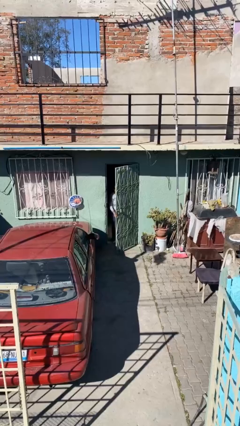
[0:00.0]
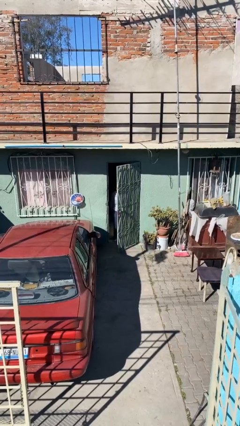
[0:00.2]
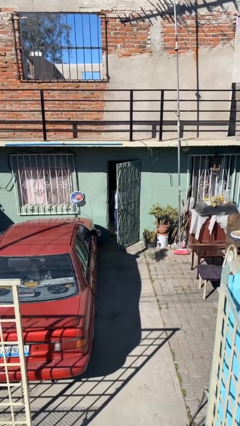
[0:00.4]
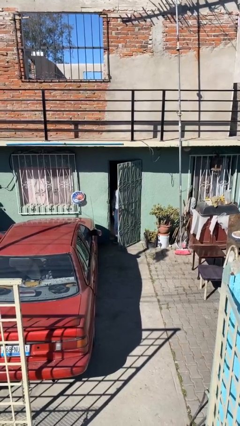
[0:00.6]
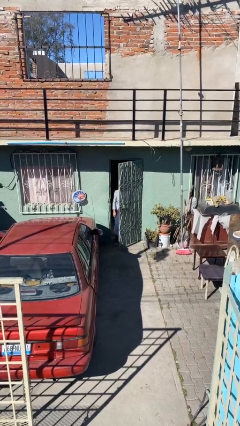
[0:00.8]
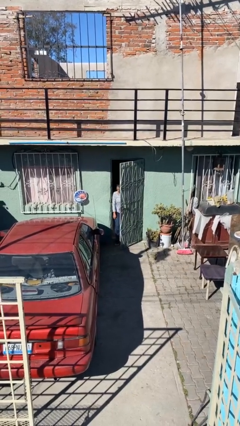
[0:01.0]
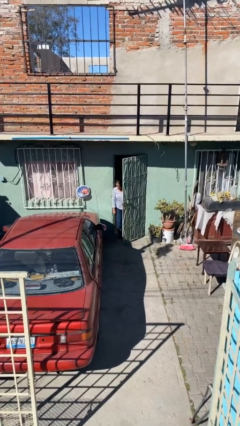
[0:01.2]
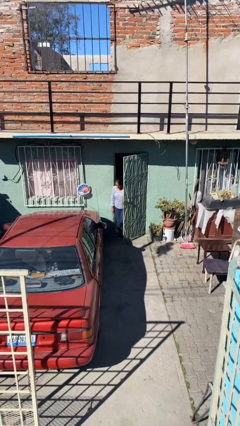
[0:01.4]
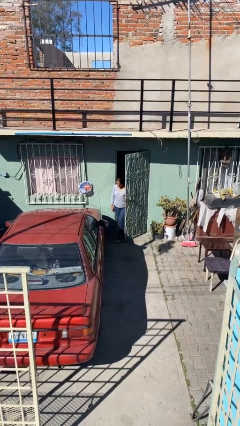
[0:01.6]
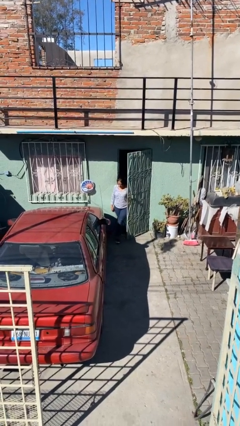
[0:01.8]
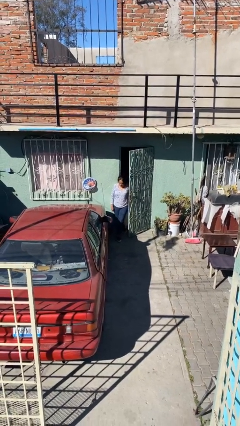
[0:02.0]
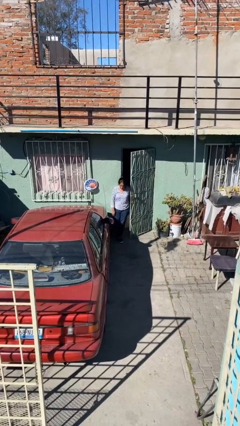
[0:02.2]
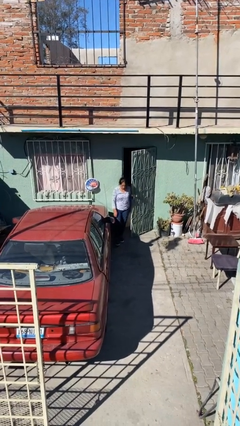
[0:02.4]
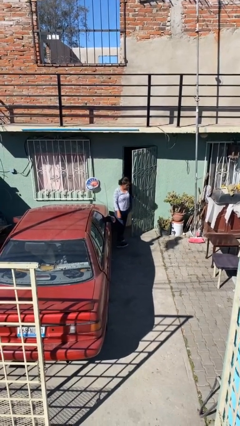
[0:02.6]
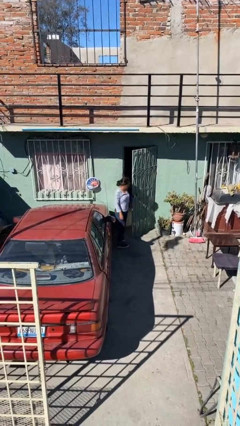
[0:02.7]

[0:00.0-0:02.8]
person enters scene through structure

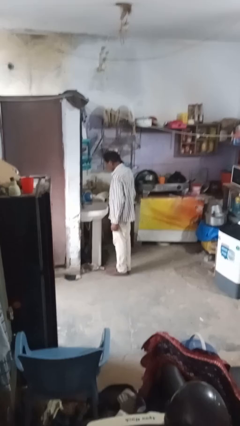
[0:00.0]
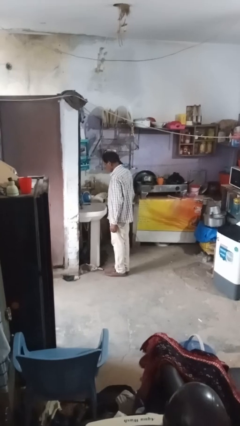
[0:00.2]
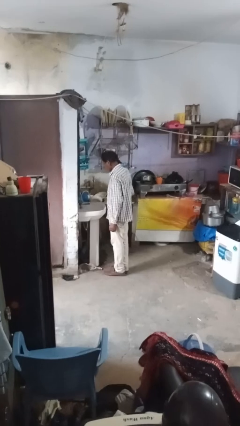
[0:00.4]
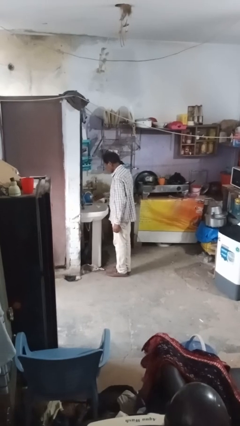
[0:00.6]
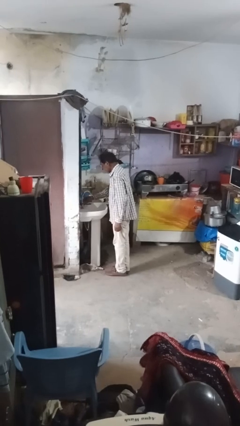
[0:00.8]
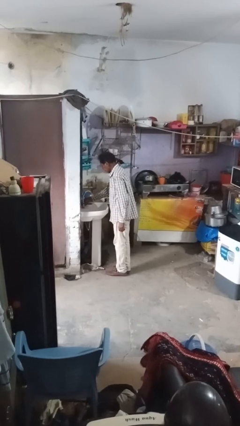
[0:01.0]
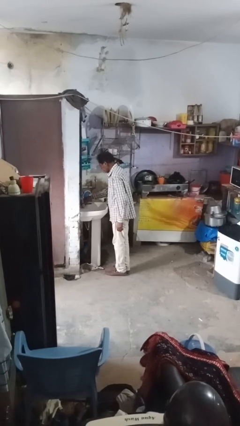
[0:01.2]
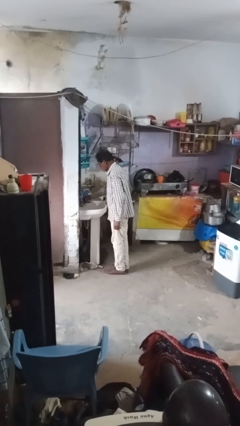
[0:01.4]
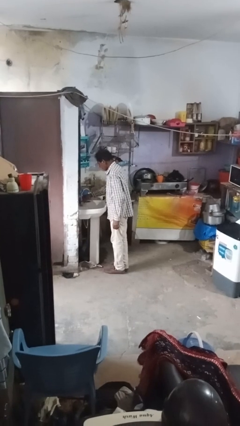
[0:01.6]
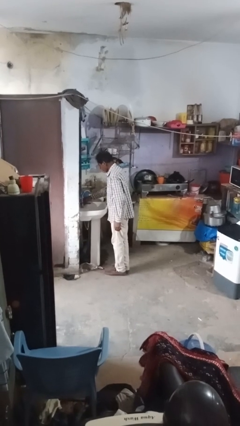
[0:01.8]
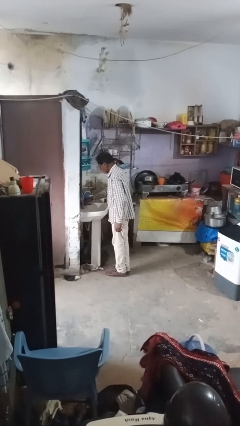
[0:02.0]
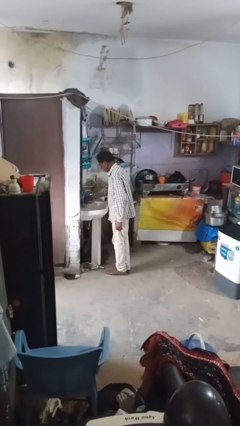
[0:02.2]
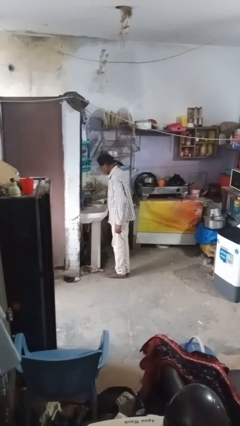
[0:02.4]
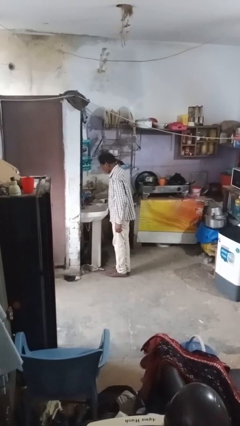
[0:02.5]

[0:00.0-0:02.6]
person turns off faucet

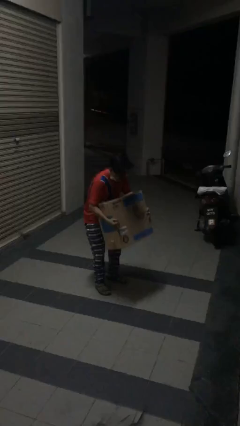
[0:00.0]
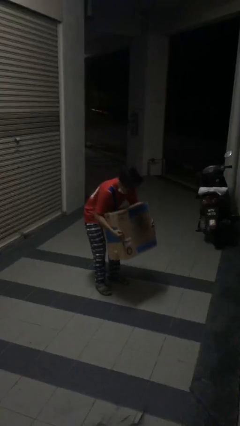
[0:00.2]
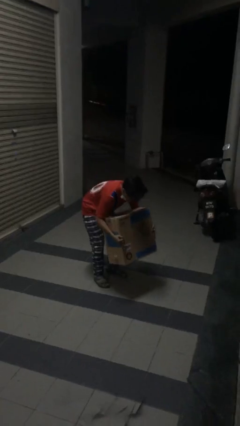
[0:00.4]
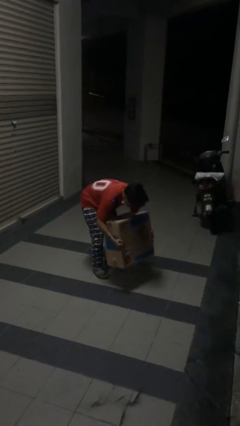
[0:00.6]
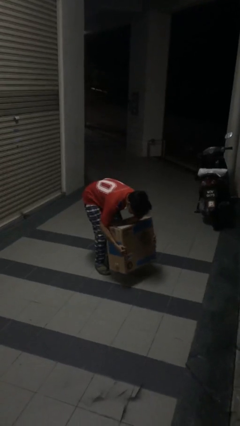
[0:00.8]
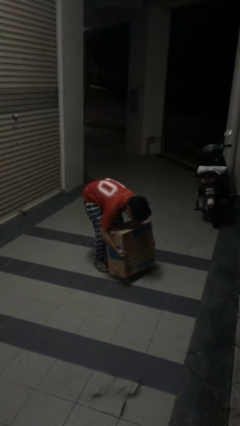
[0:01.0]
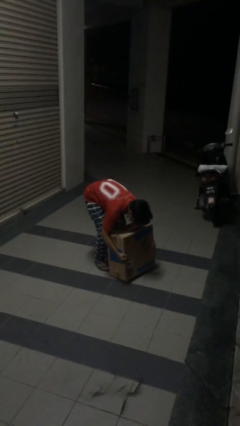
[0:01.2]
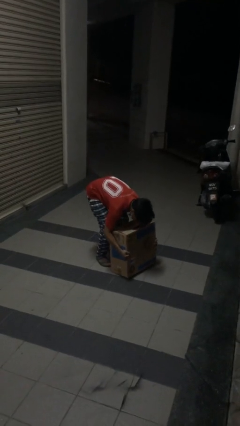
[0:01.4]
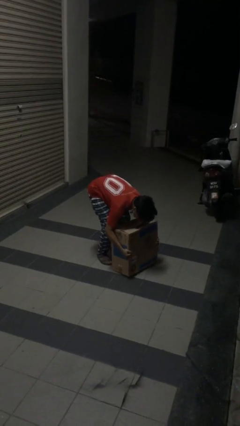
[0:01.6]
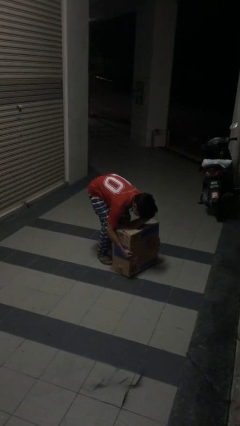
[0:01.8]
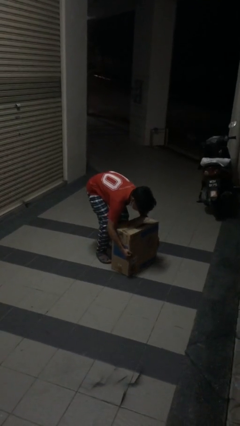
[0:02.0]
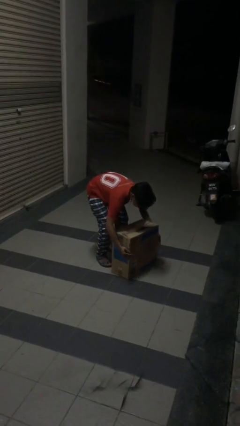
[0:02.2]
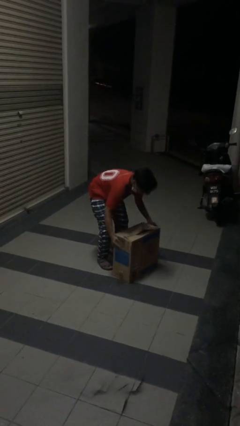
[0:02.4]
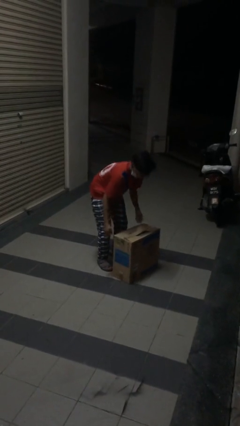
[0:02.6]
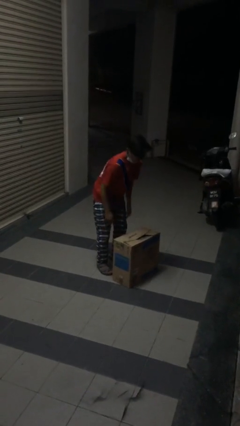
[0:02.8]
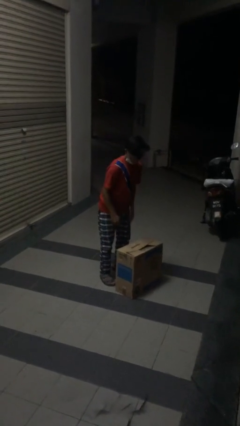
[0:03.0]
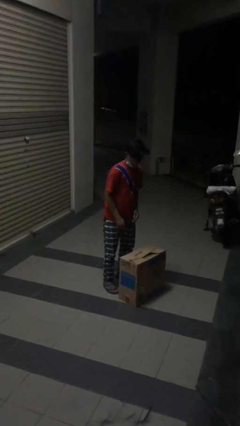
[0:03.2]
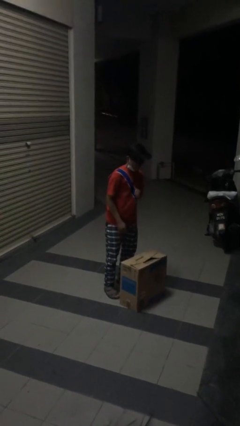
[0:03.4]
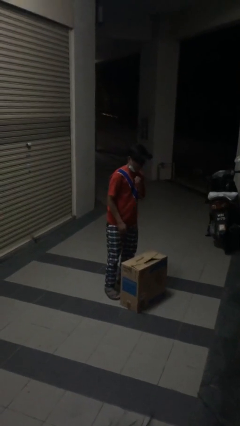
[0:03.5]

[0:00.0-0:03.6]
person puts down object on floor

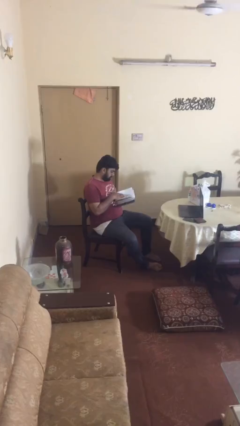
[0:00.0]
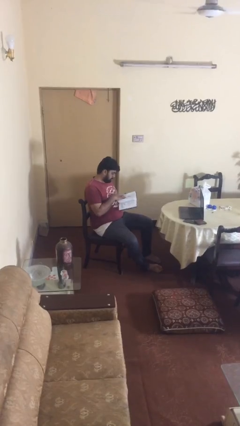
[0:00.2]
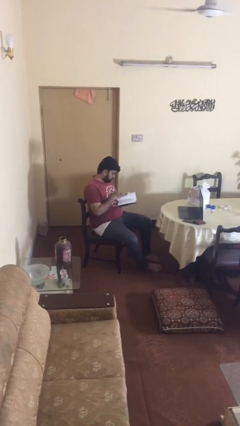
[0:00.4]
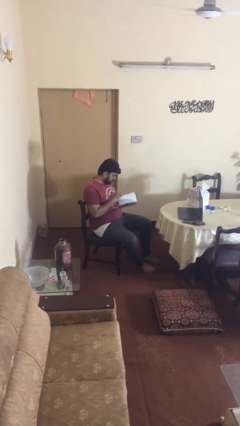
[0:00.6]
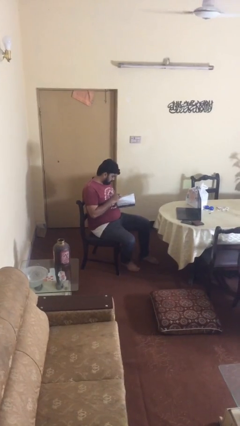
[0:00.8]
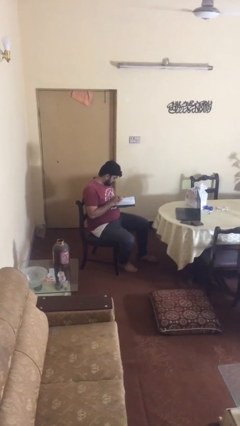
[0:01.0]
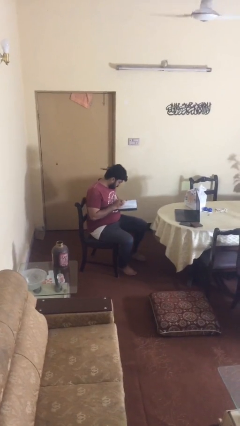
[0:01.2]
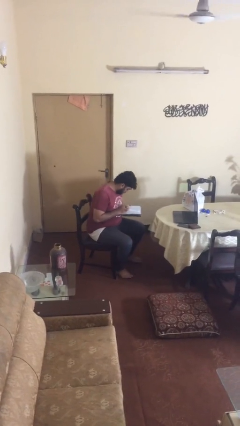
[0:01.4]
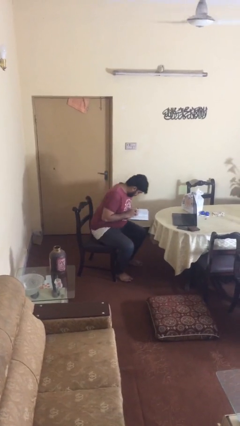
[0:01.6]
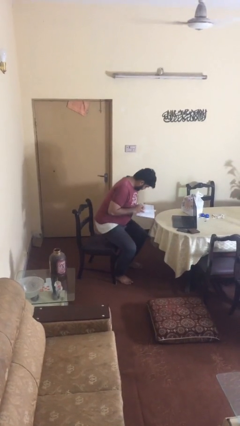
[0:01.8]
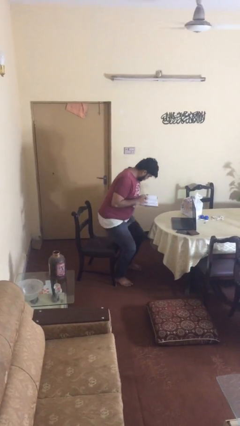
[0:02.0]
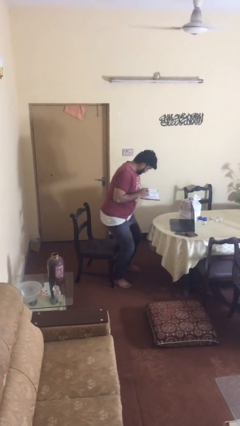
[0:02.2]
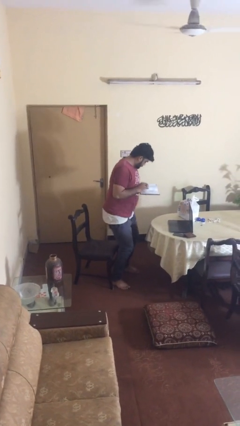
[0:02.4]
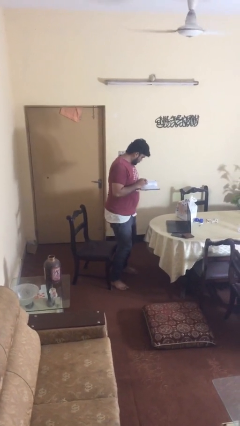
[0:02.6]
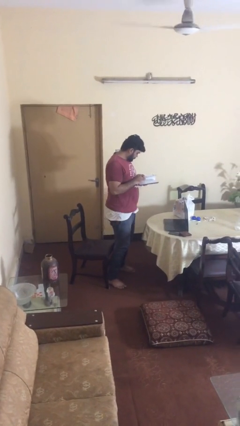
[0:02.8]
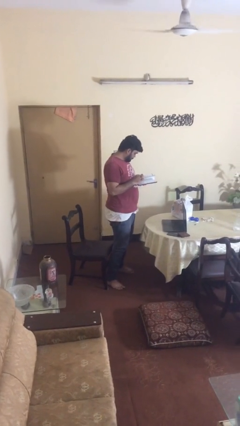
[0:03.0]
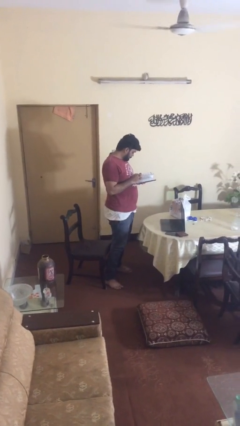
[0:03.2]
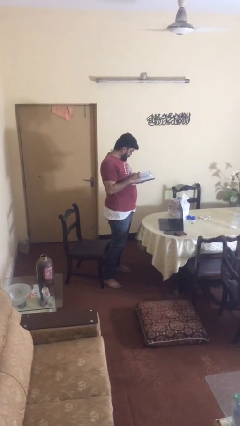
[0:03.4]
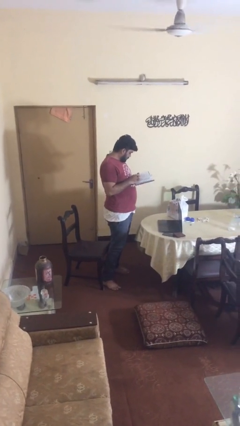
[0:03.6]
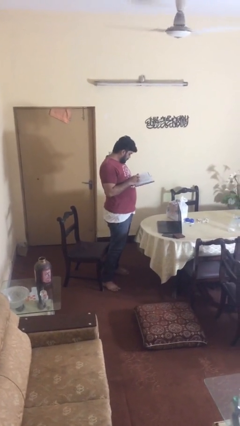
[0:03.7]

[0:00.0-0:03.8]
person stands up

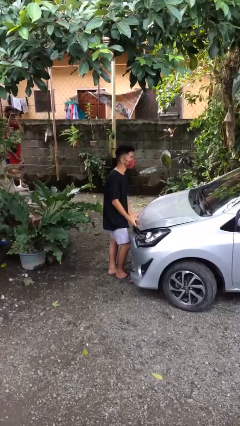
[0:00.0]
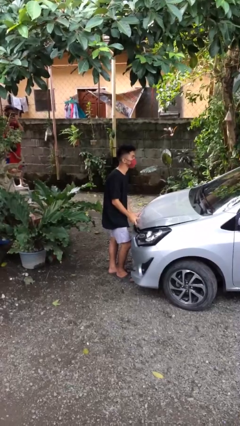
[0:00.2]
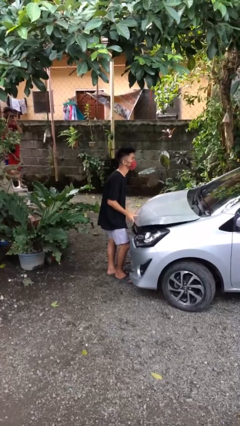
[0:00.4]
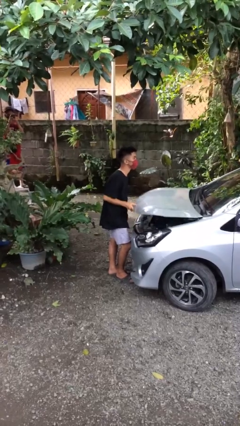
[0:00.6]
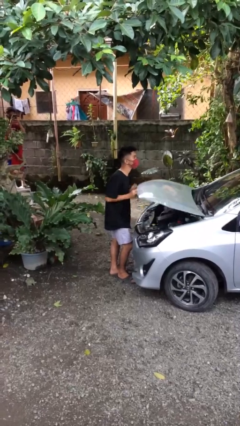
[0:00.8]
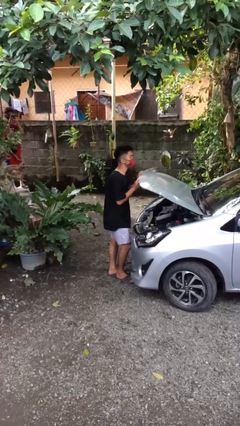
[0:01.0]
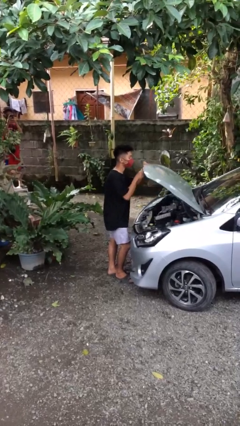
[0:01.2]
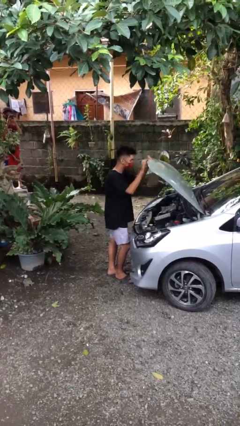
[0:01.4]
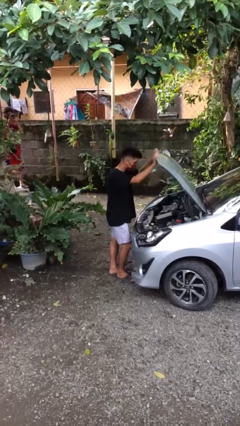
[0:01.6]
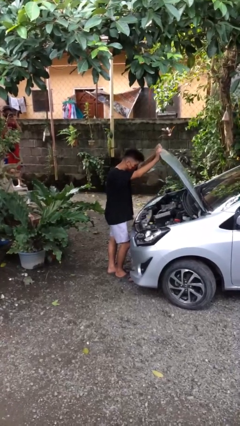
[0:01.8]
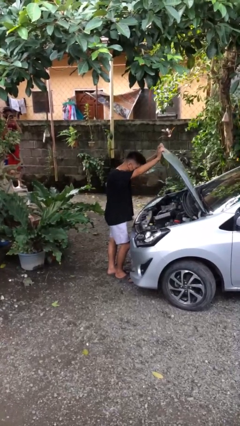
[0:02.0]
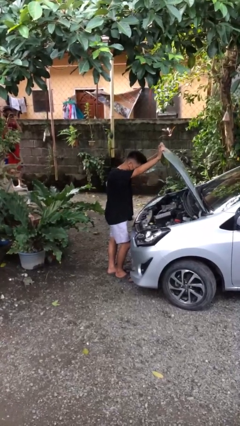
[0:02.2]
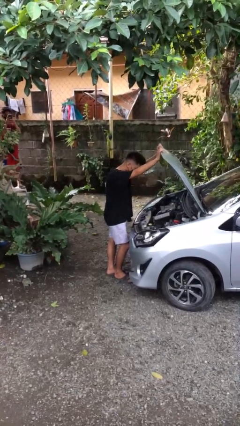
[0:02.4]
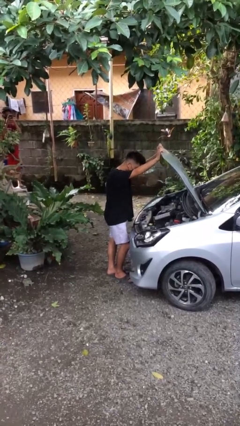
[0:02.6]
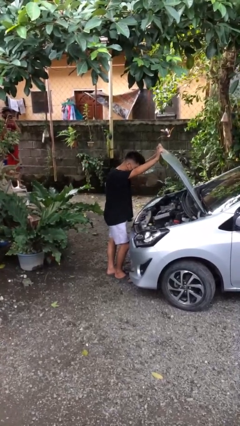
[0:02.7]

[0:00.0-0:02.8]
person opens car hood

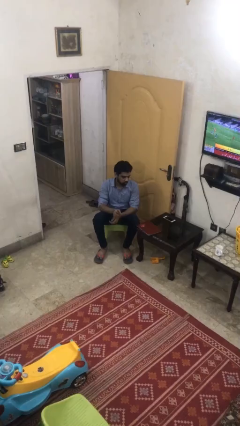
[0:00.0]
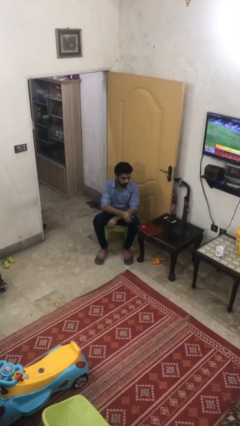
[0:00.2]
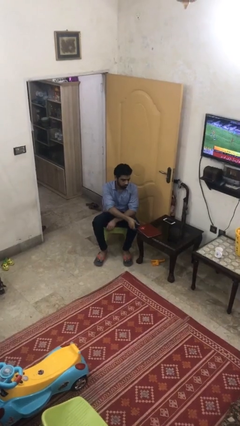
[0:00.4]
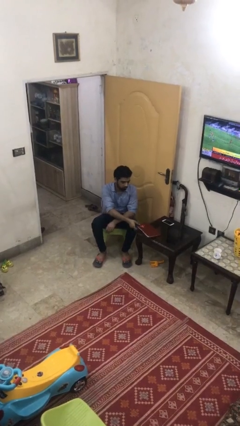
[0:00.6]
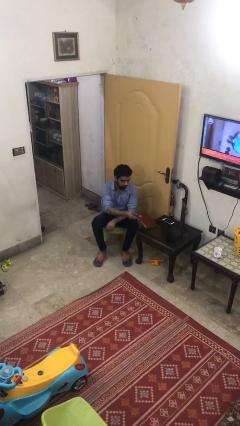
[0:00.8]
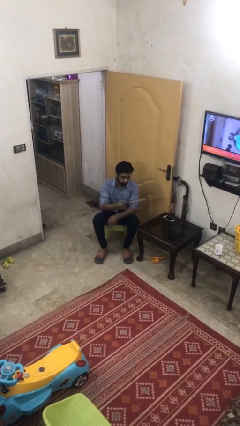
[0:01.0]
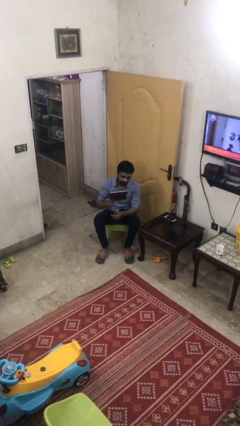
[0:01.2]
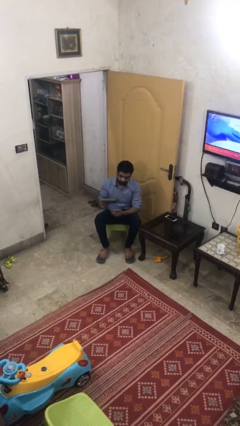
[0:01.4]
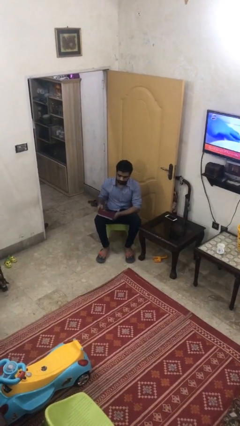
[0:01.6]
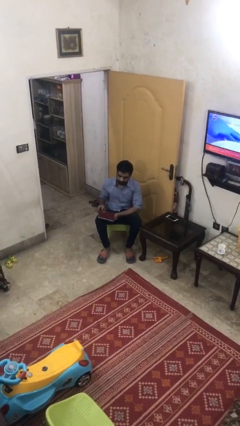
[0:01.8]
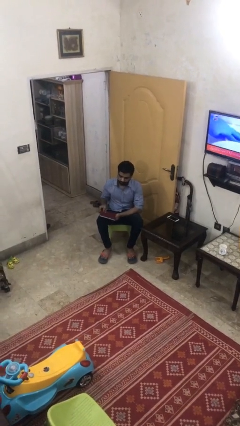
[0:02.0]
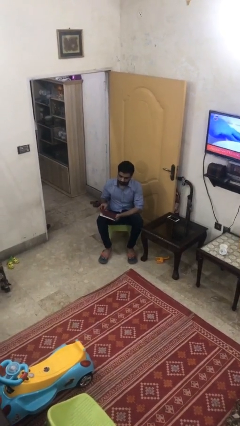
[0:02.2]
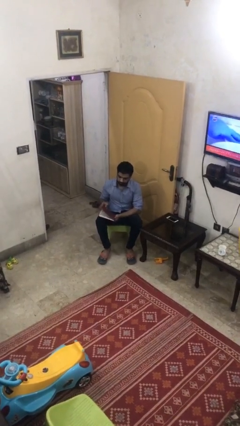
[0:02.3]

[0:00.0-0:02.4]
person picks up object from table
